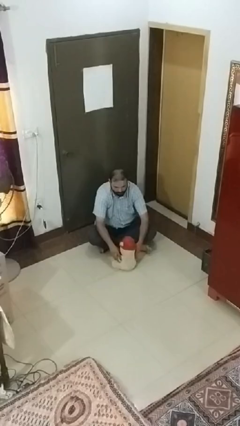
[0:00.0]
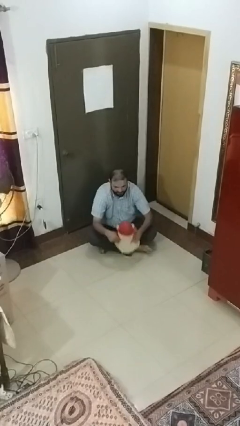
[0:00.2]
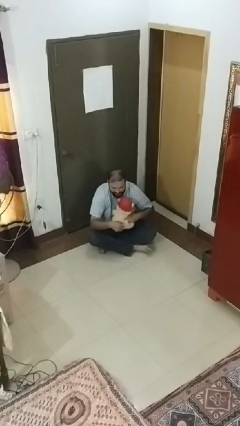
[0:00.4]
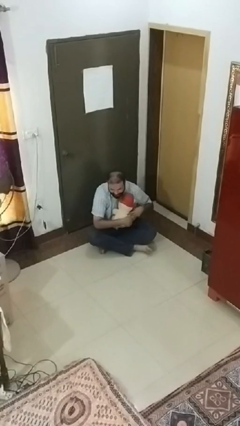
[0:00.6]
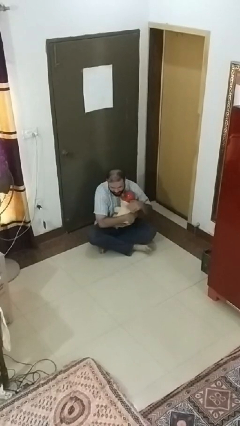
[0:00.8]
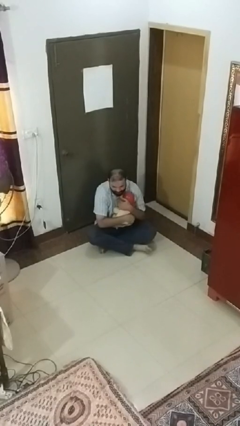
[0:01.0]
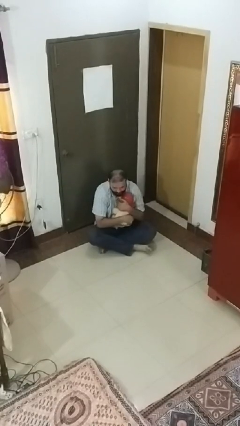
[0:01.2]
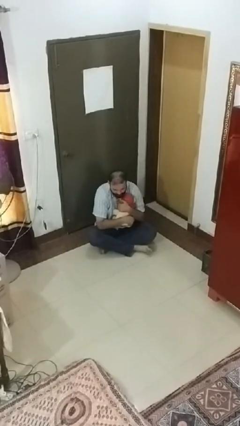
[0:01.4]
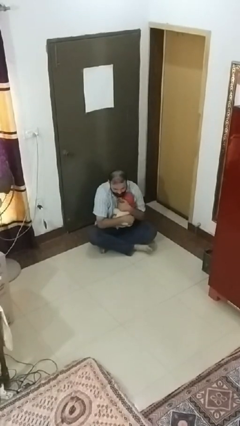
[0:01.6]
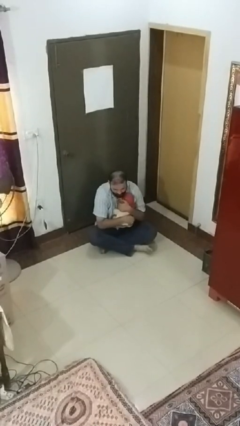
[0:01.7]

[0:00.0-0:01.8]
person hugs stuffed animal

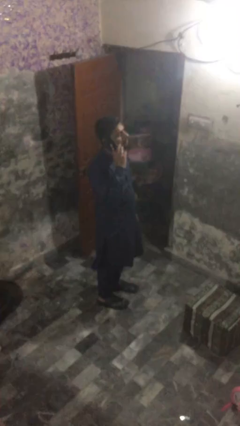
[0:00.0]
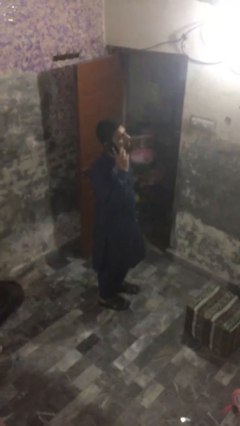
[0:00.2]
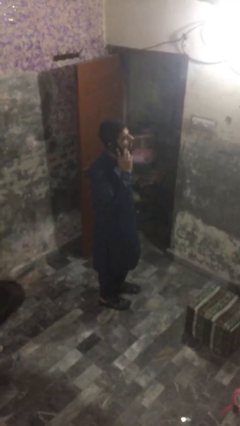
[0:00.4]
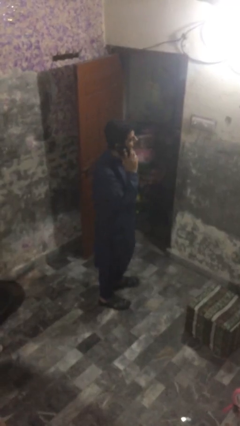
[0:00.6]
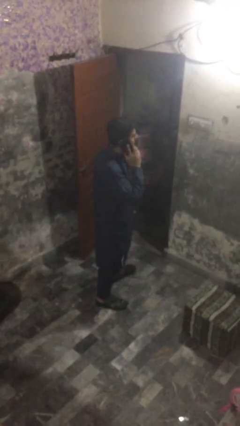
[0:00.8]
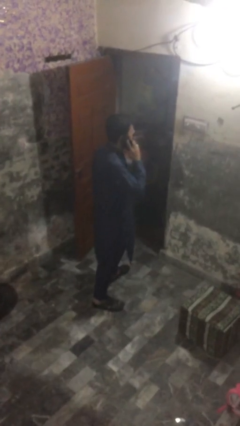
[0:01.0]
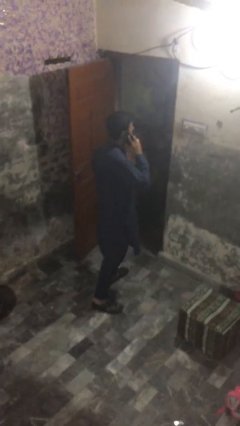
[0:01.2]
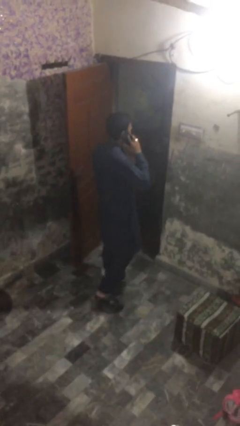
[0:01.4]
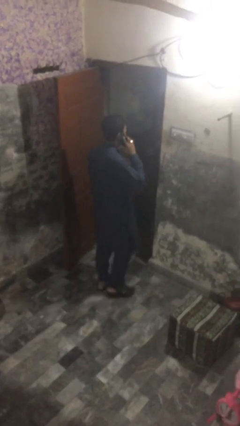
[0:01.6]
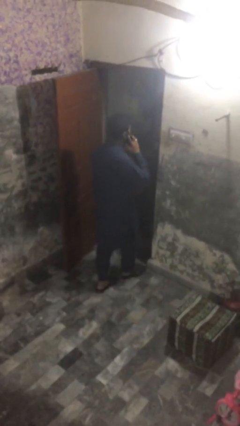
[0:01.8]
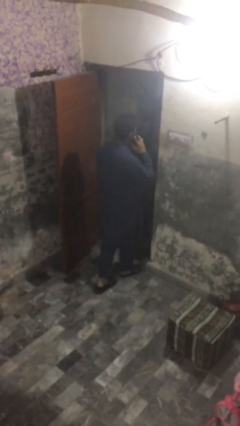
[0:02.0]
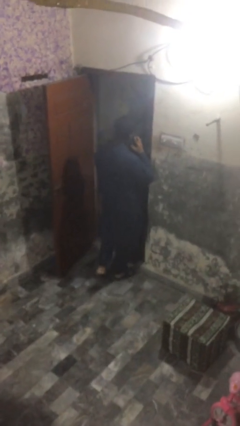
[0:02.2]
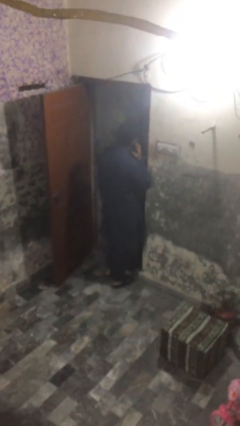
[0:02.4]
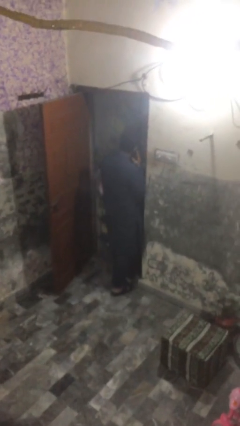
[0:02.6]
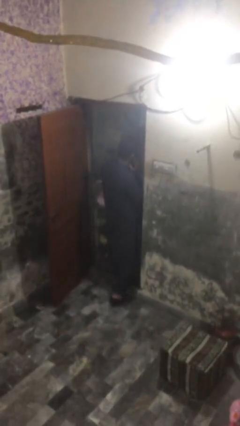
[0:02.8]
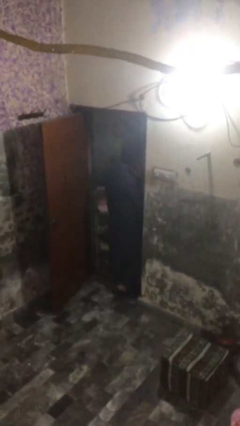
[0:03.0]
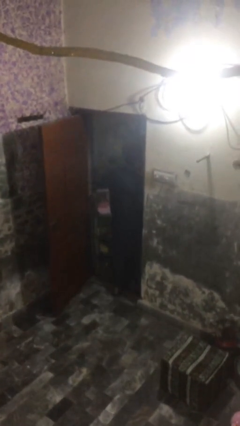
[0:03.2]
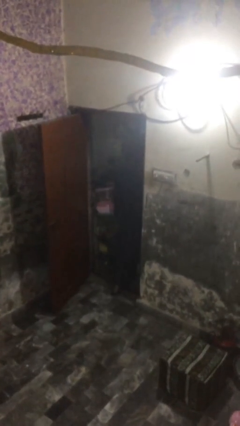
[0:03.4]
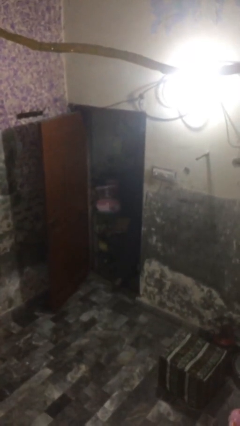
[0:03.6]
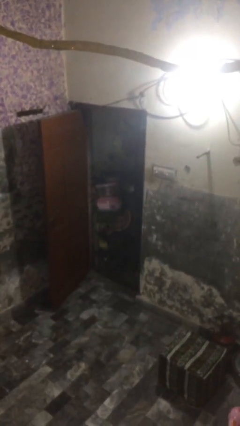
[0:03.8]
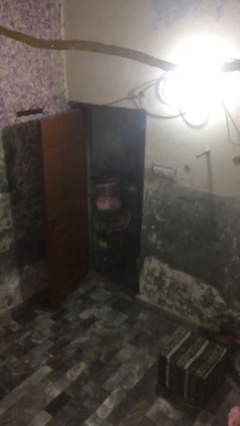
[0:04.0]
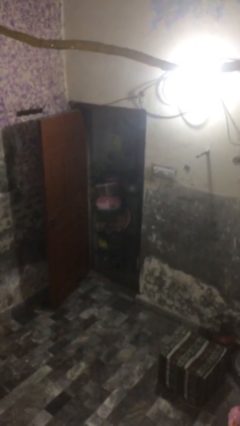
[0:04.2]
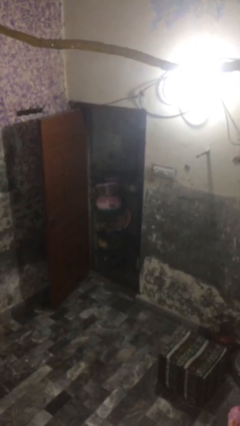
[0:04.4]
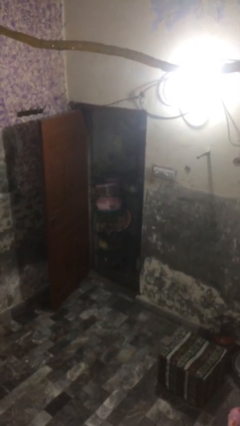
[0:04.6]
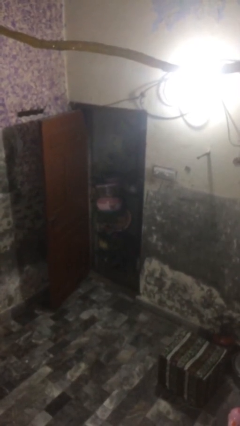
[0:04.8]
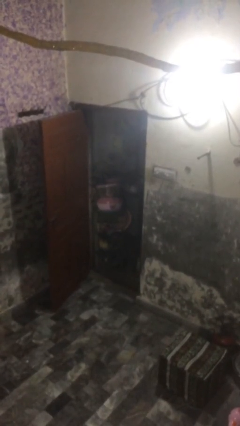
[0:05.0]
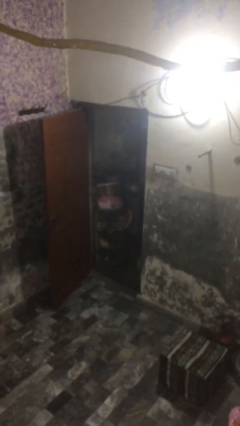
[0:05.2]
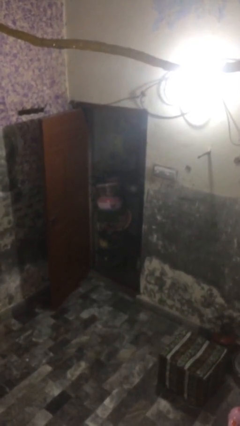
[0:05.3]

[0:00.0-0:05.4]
person exits scene through structure

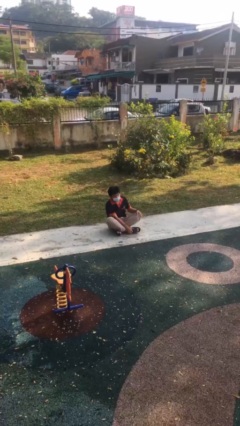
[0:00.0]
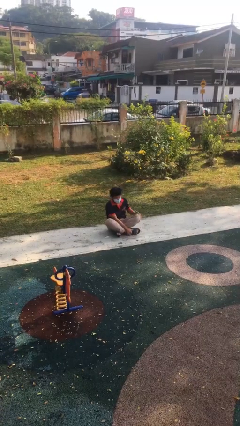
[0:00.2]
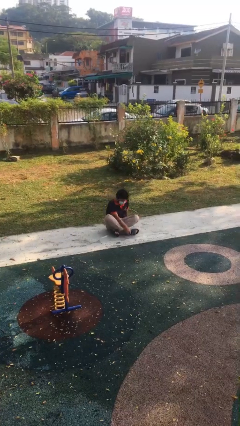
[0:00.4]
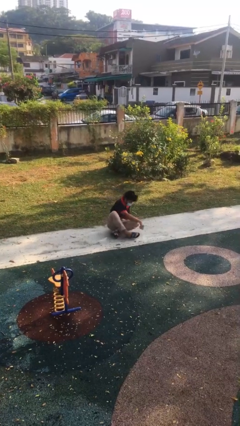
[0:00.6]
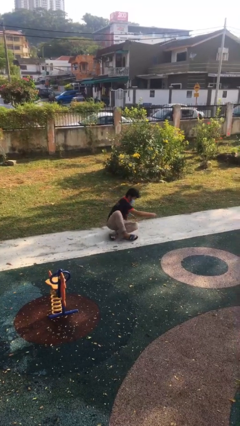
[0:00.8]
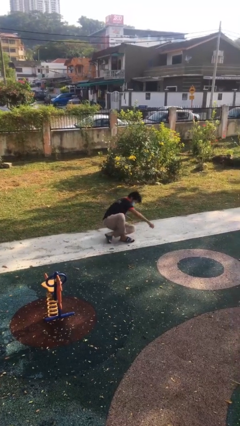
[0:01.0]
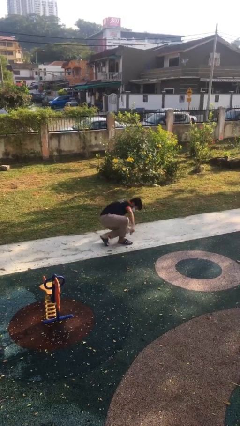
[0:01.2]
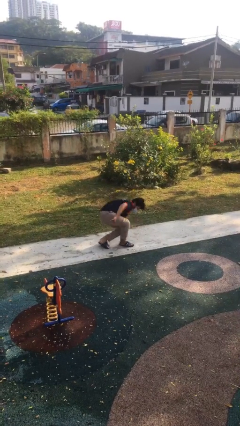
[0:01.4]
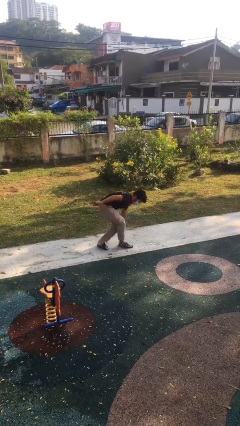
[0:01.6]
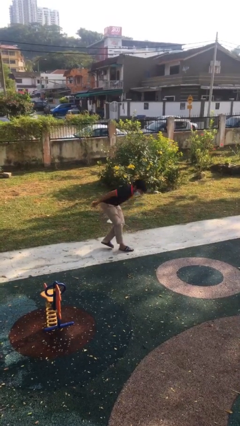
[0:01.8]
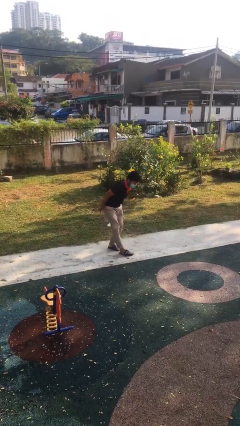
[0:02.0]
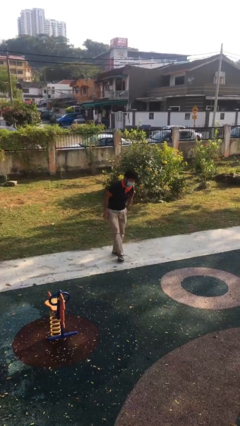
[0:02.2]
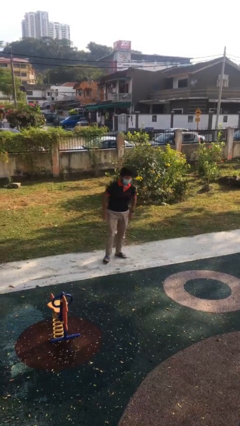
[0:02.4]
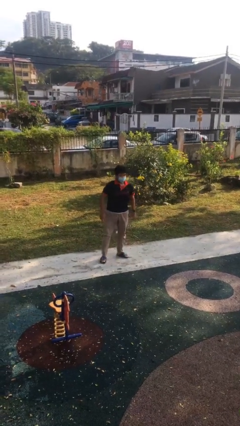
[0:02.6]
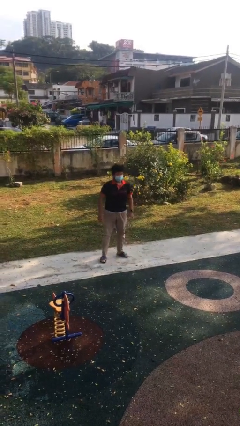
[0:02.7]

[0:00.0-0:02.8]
person stands up from floor

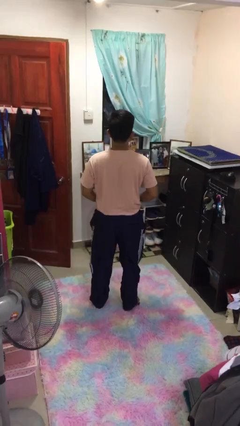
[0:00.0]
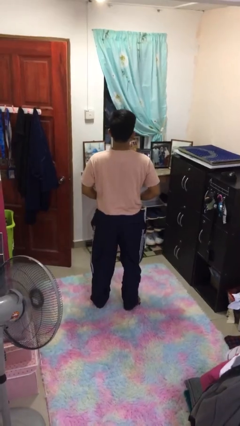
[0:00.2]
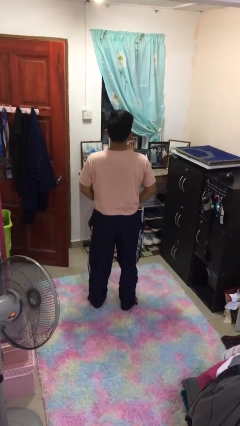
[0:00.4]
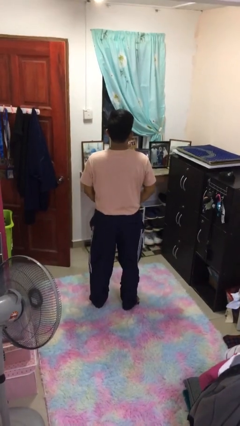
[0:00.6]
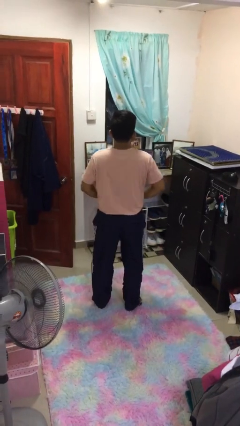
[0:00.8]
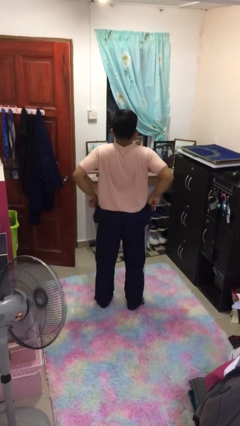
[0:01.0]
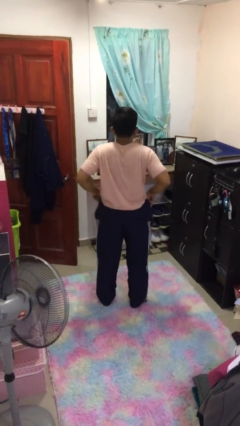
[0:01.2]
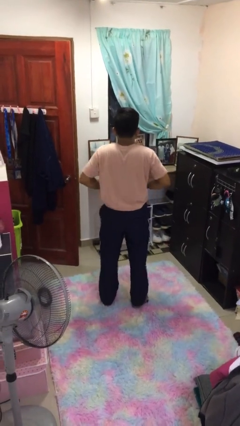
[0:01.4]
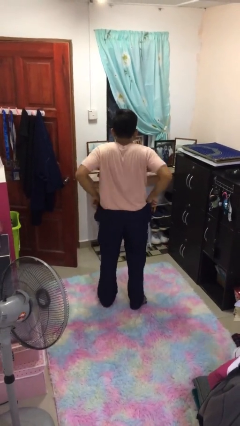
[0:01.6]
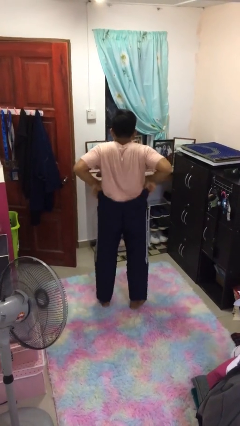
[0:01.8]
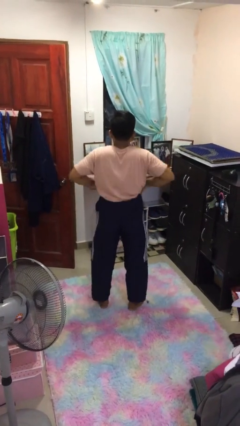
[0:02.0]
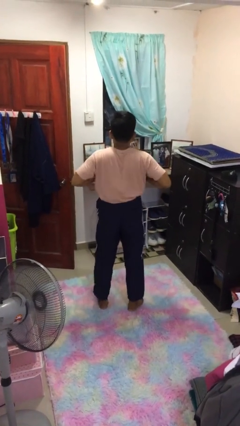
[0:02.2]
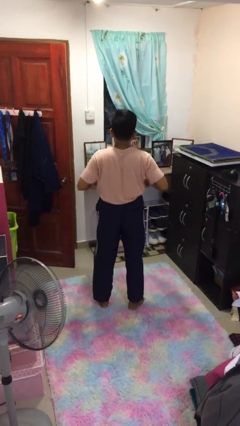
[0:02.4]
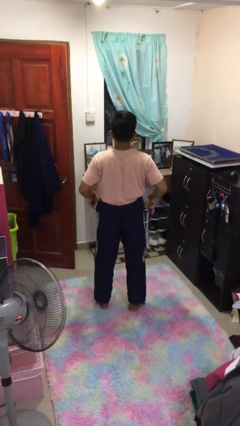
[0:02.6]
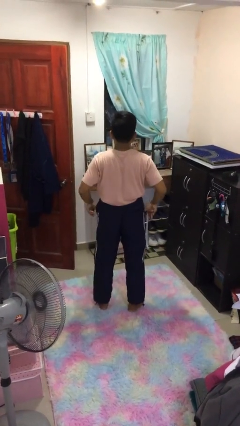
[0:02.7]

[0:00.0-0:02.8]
person hikes up pants

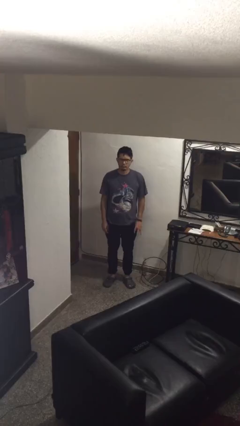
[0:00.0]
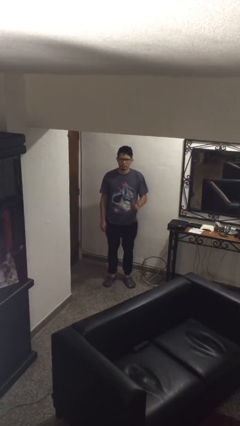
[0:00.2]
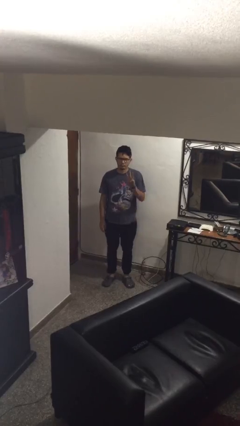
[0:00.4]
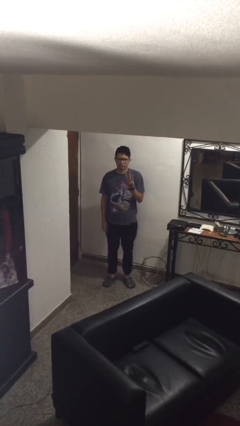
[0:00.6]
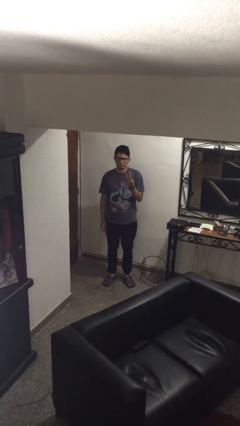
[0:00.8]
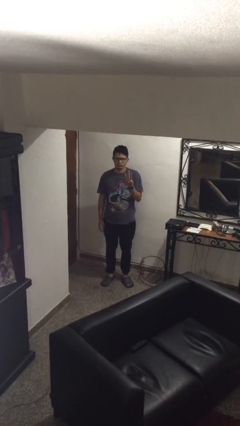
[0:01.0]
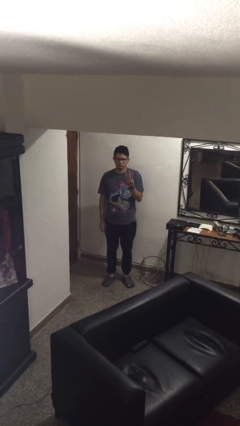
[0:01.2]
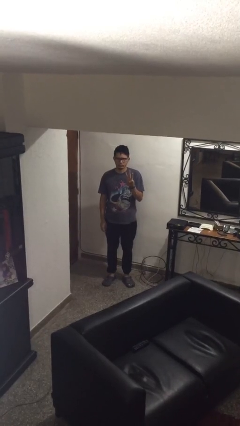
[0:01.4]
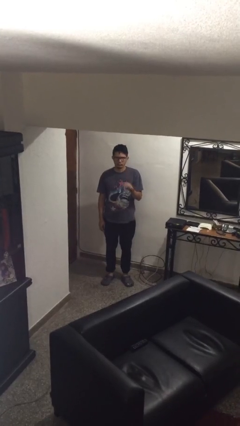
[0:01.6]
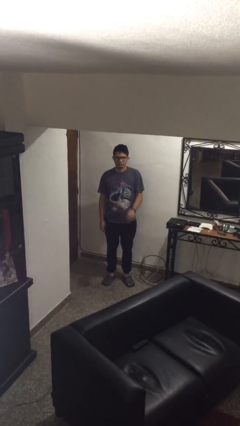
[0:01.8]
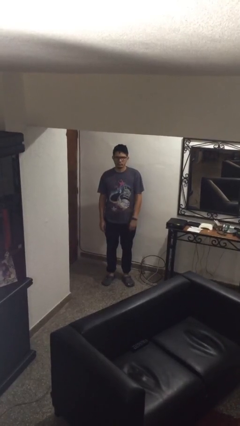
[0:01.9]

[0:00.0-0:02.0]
person gestures number three

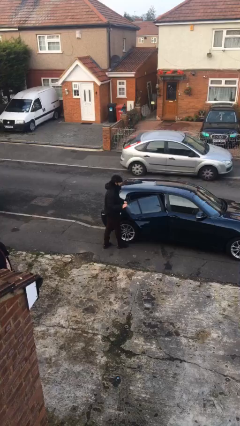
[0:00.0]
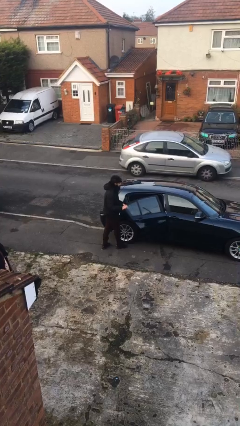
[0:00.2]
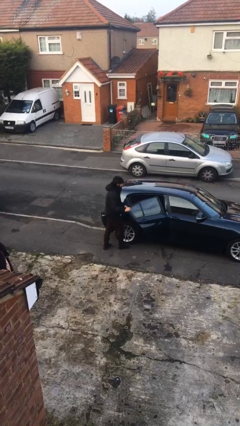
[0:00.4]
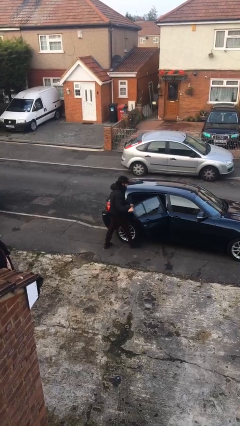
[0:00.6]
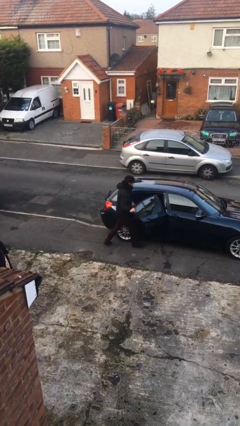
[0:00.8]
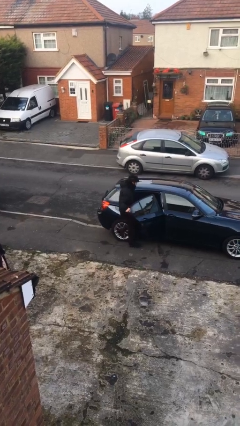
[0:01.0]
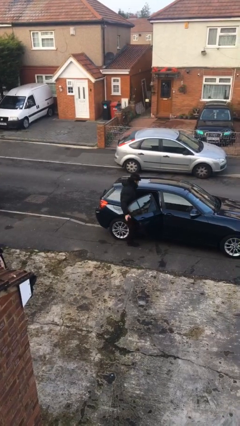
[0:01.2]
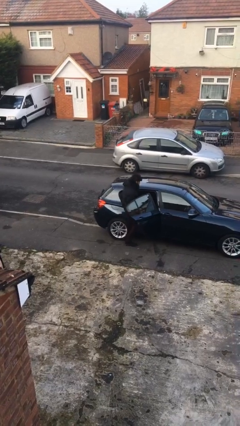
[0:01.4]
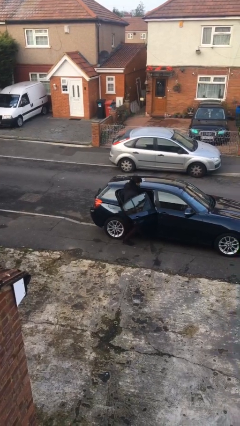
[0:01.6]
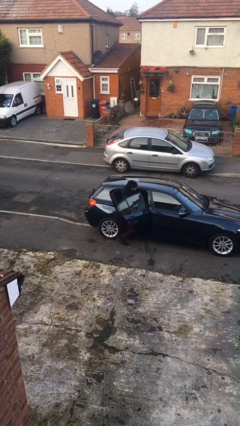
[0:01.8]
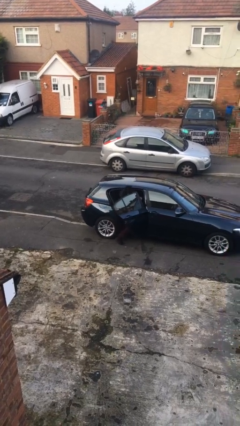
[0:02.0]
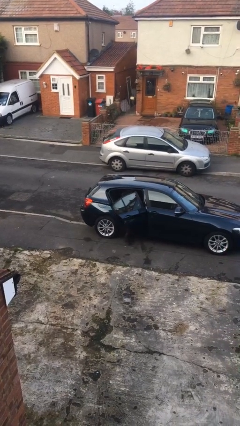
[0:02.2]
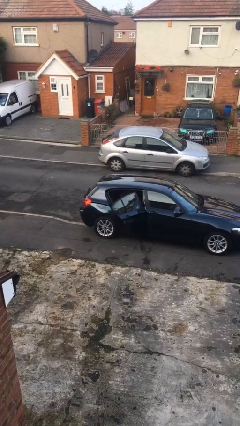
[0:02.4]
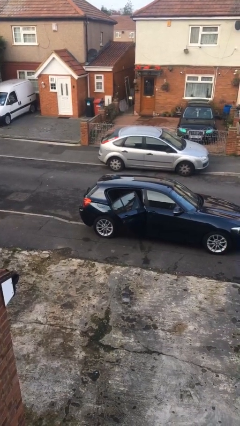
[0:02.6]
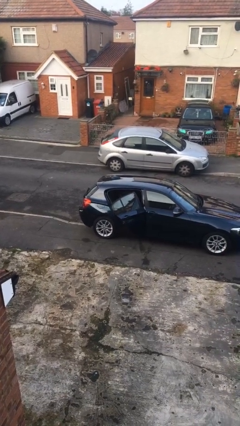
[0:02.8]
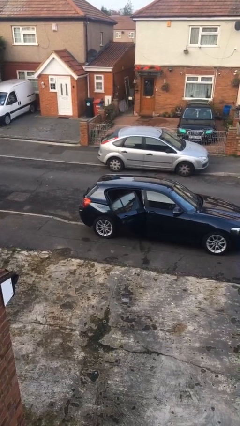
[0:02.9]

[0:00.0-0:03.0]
person enters car
